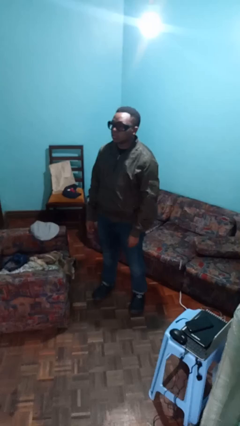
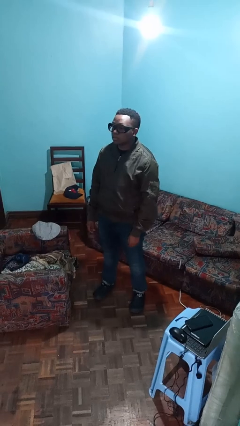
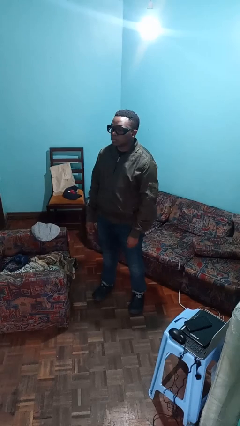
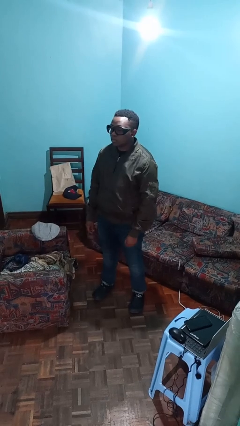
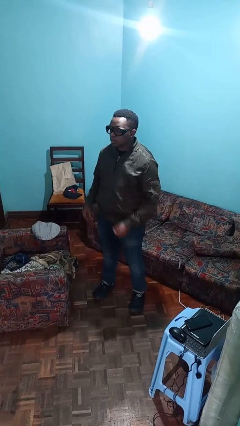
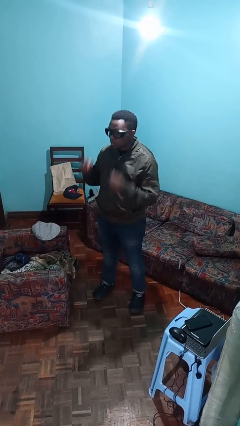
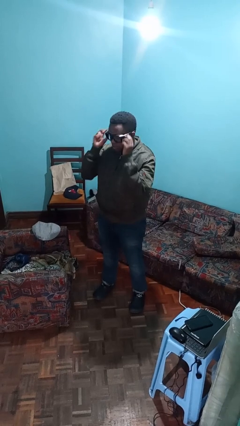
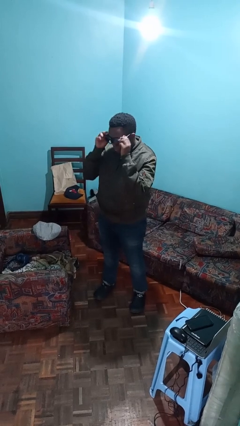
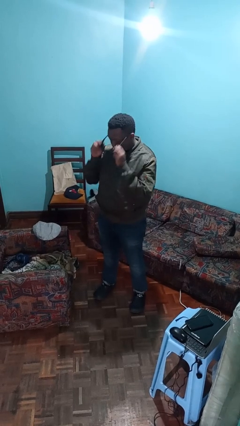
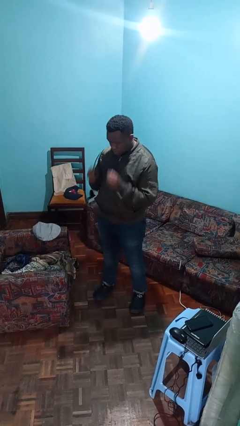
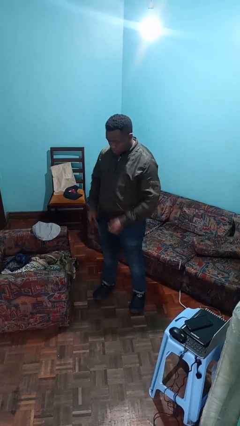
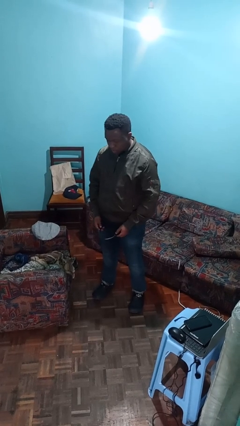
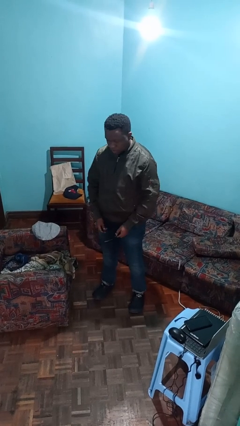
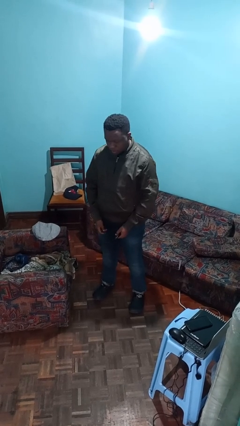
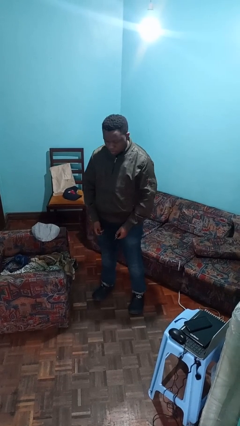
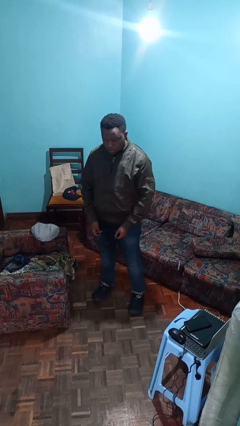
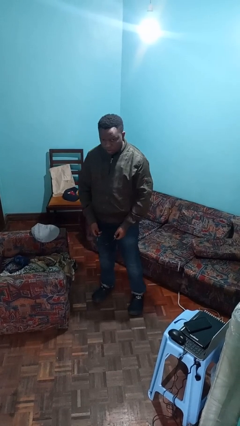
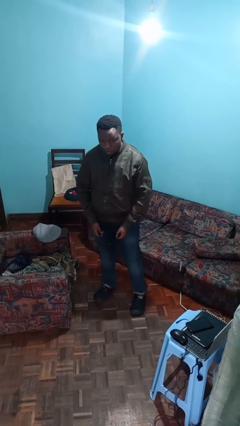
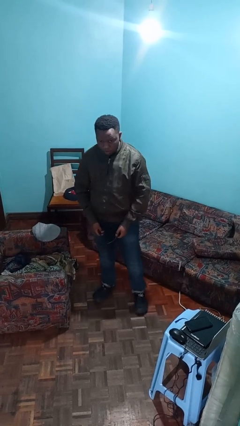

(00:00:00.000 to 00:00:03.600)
person takes off glasses

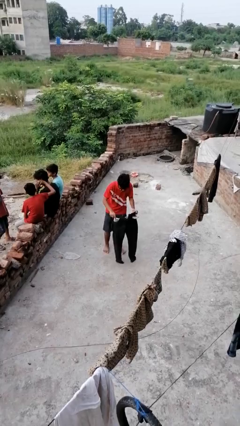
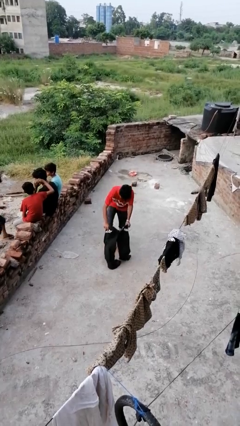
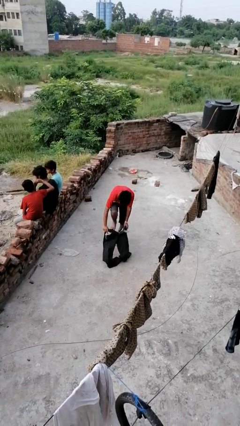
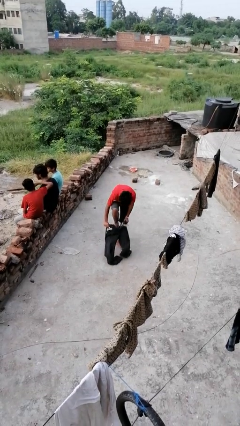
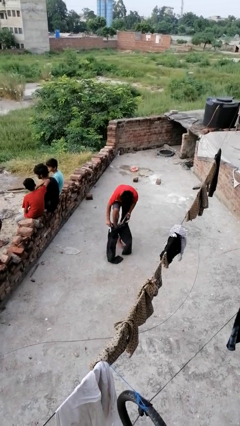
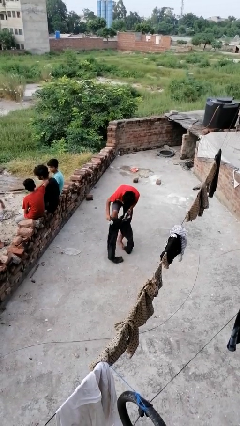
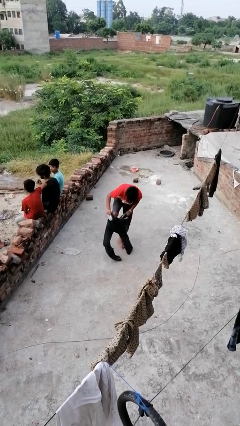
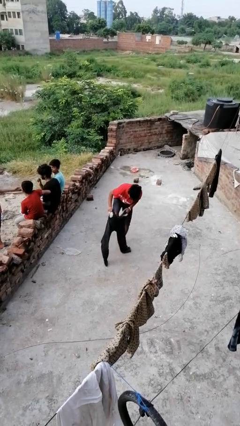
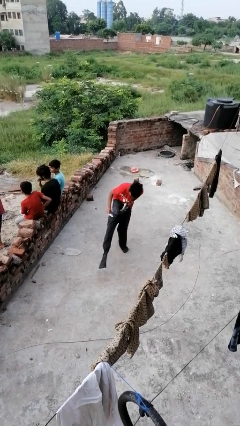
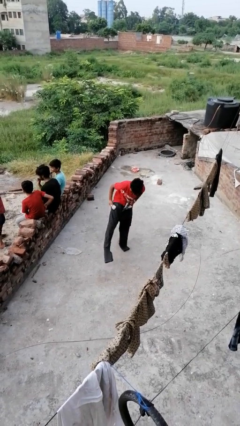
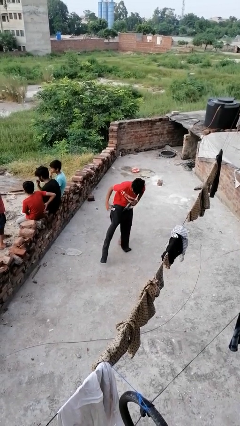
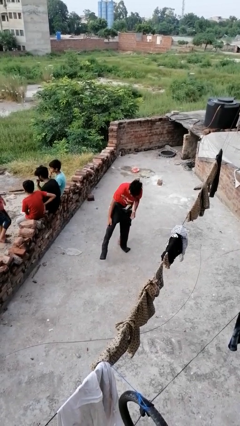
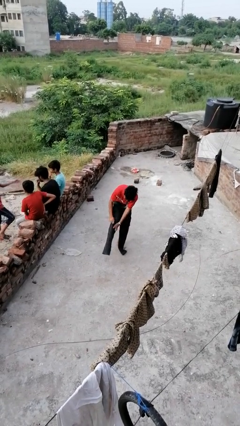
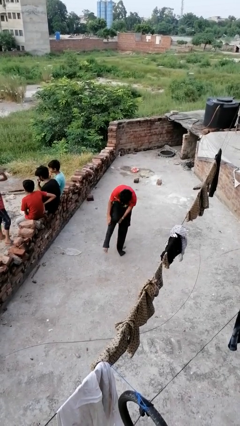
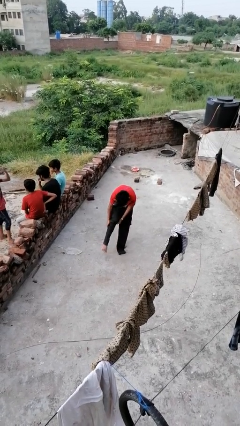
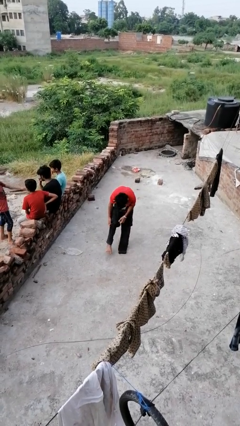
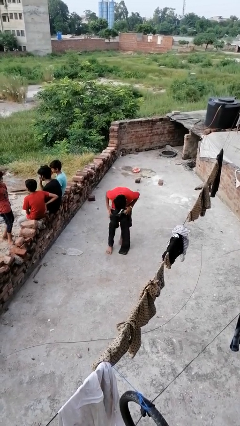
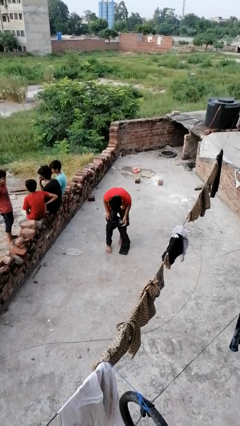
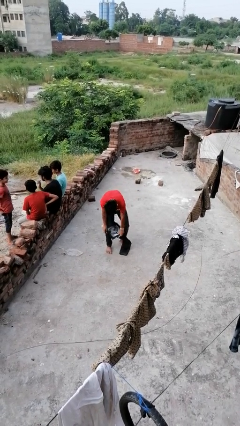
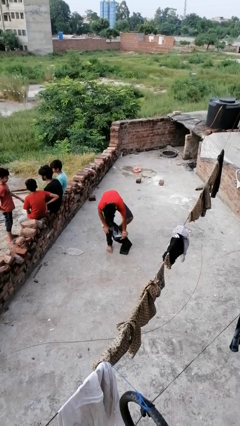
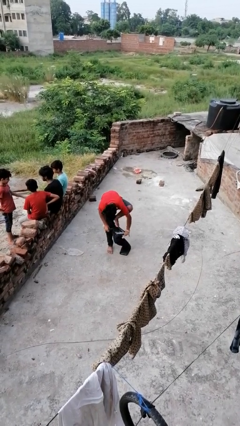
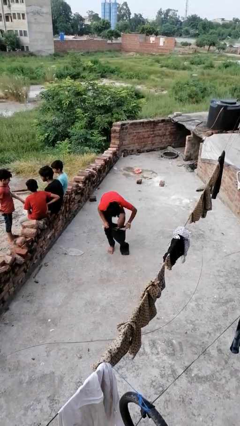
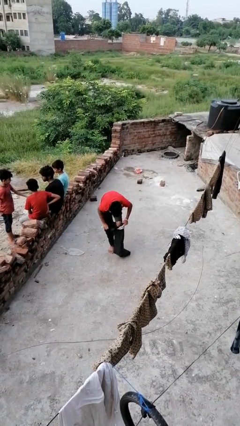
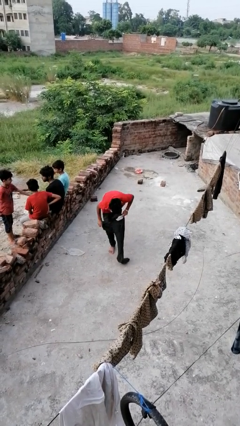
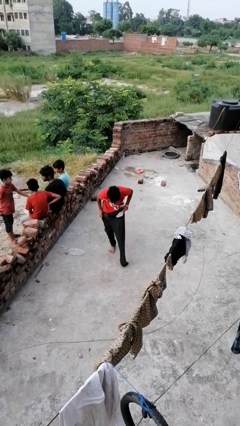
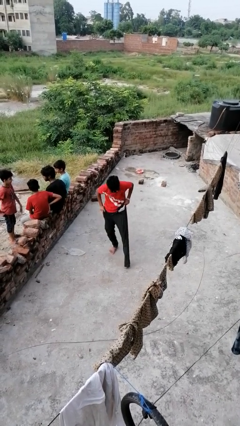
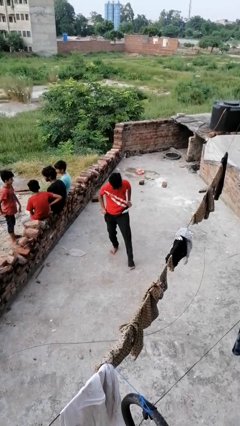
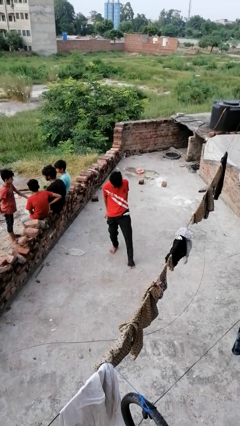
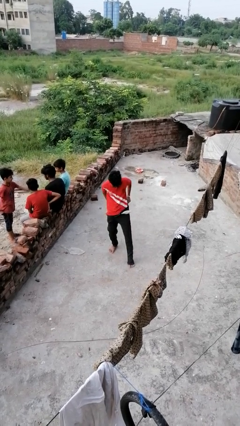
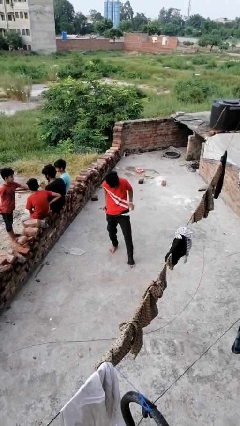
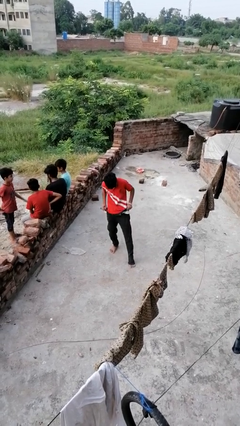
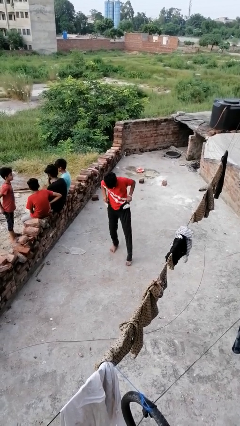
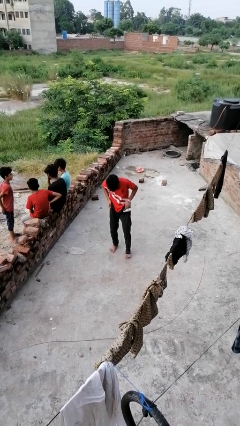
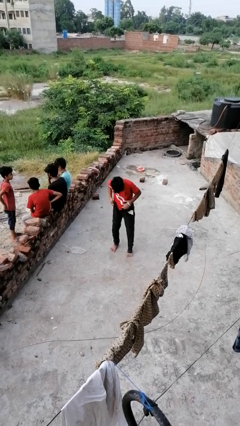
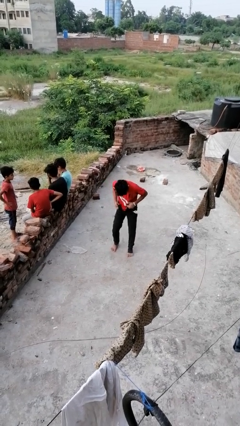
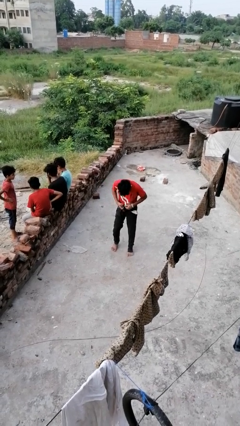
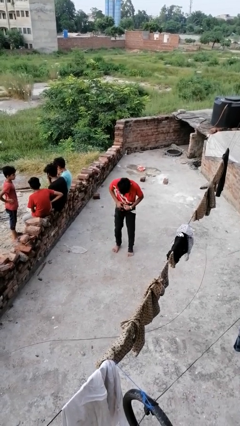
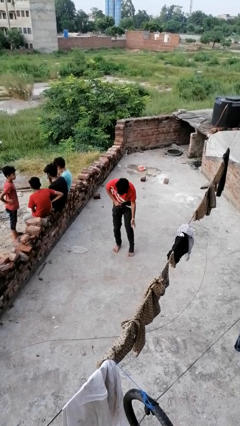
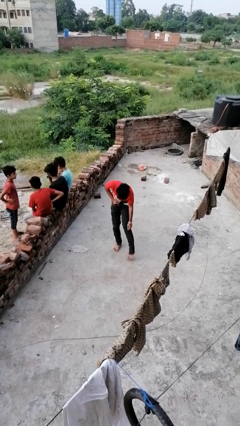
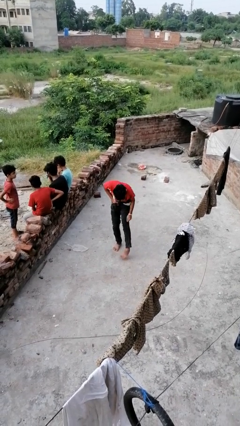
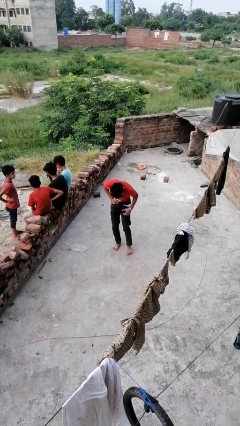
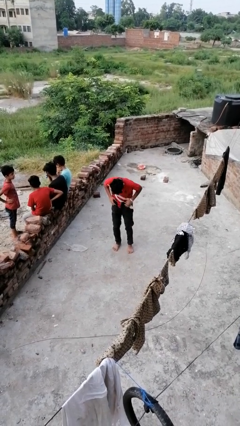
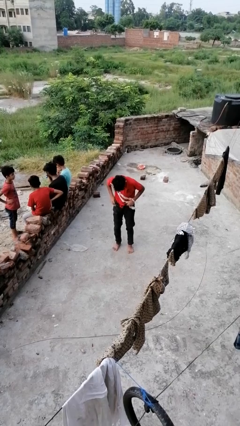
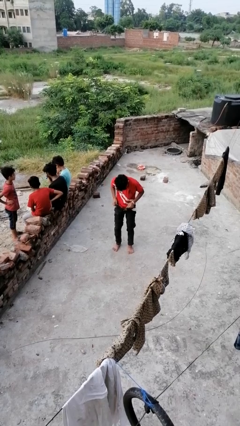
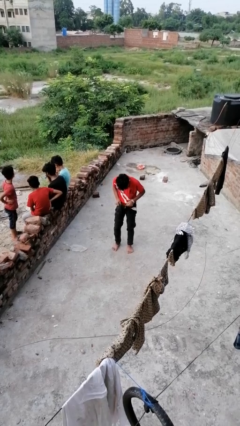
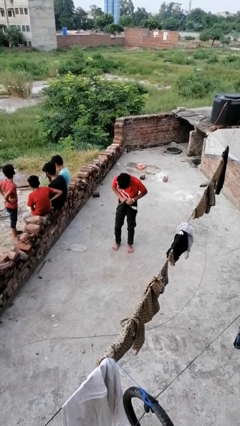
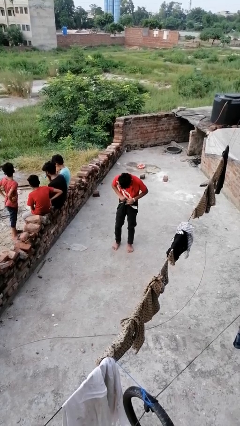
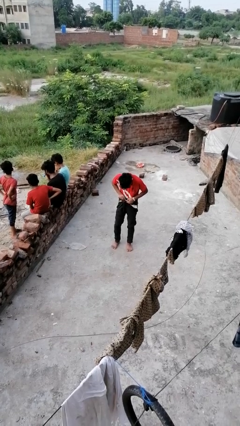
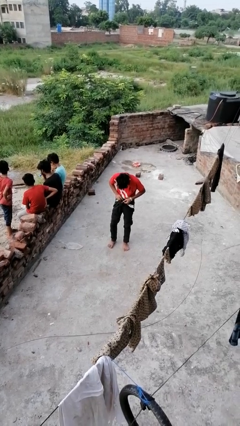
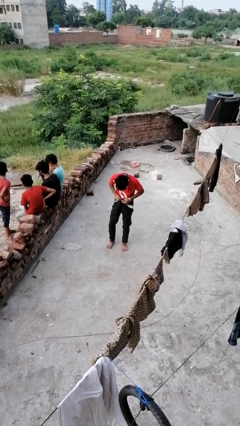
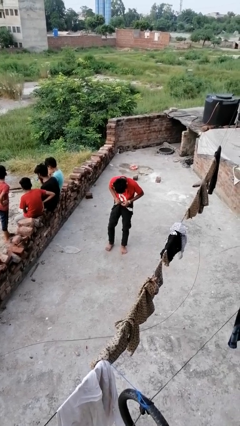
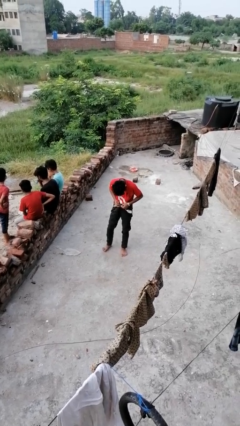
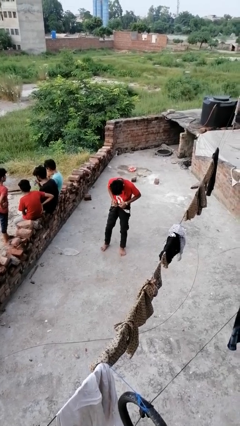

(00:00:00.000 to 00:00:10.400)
person takes off pants

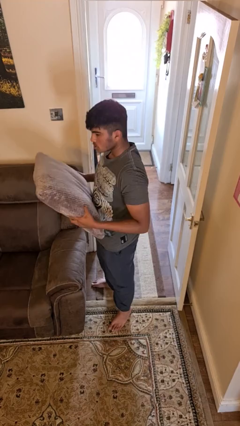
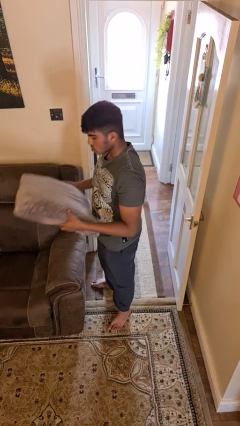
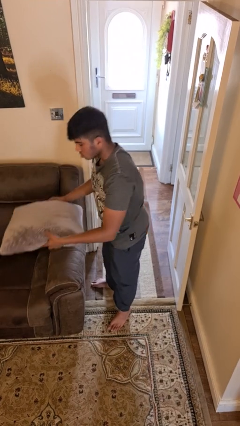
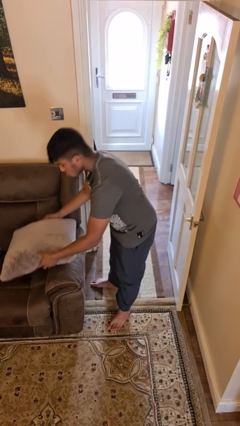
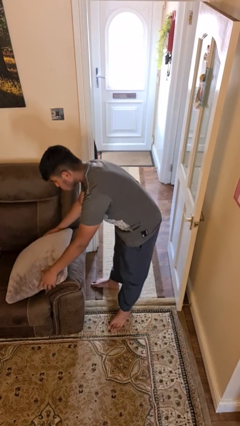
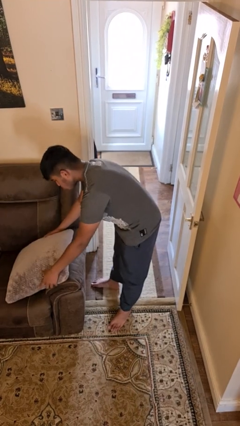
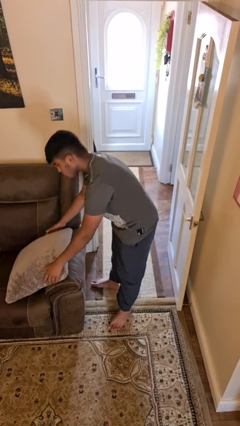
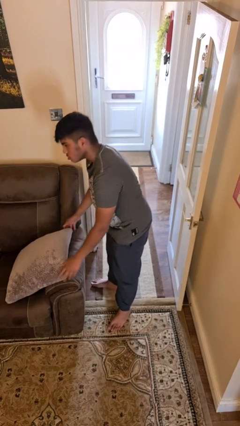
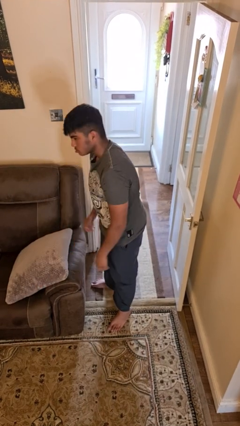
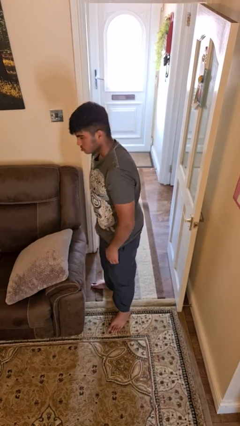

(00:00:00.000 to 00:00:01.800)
person puts down object on couch

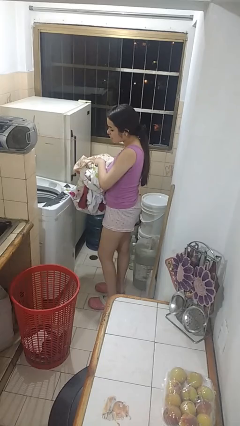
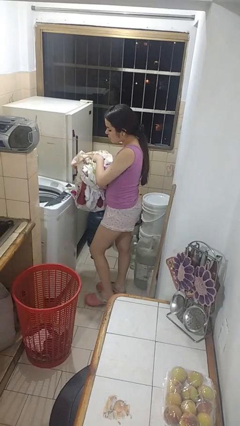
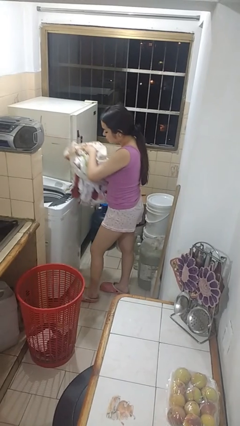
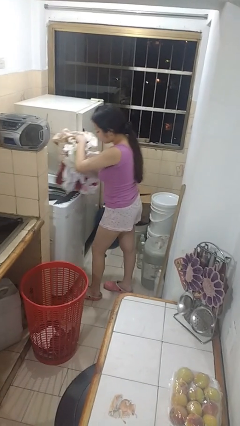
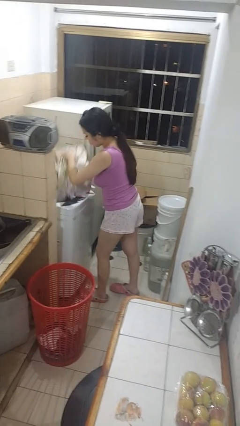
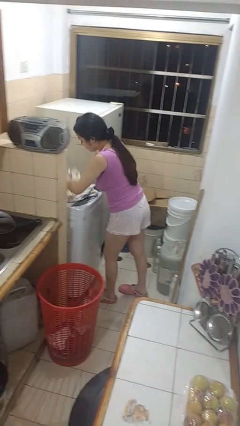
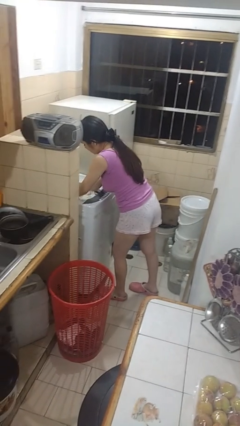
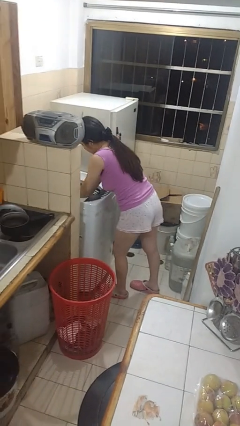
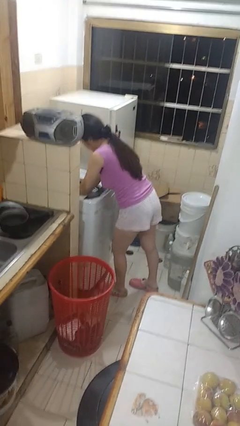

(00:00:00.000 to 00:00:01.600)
person loads clotheswasher

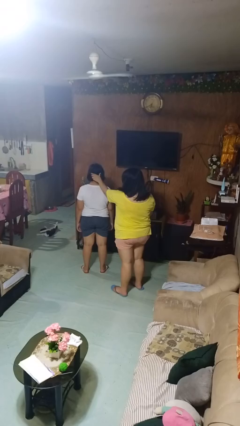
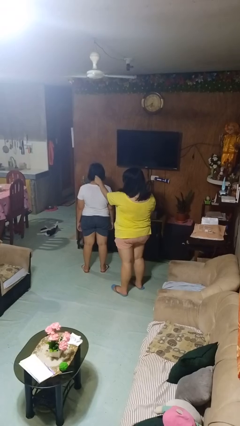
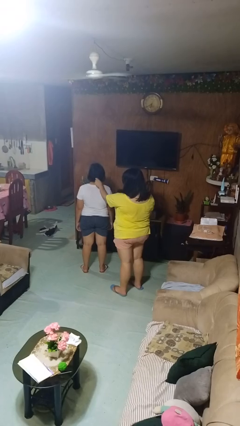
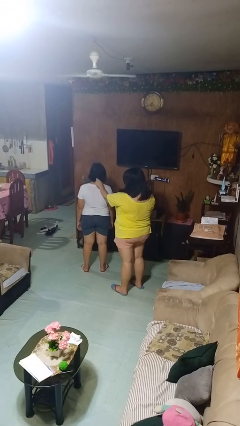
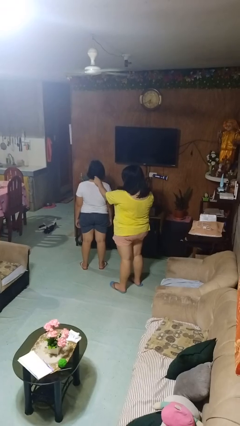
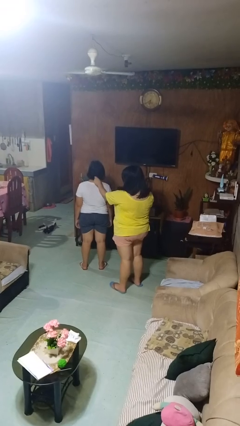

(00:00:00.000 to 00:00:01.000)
person grabs person by hair
